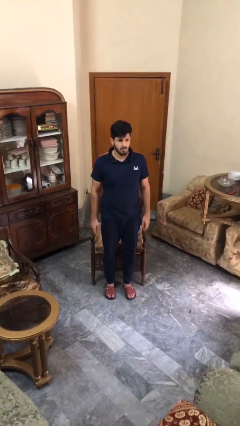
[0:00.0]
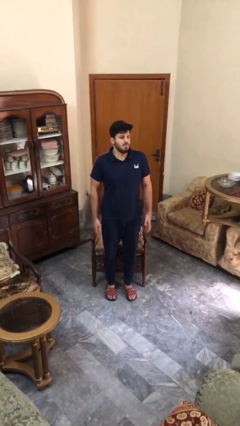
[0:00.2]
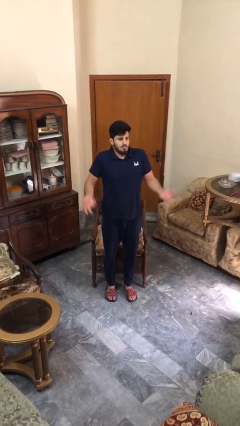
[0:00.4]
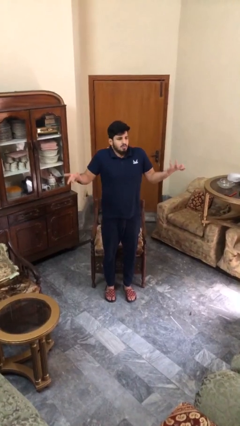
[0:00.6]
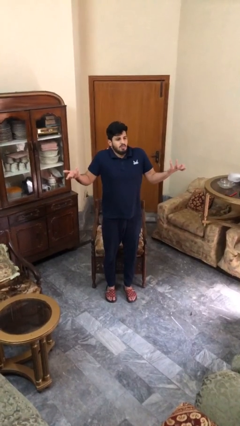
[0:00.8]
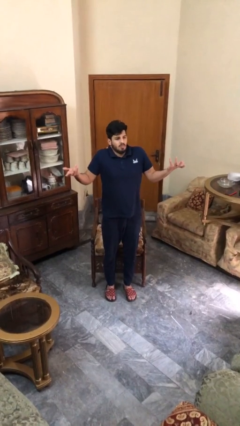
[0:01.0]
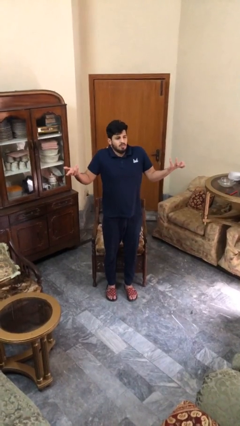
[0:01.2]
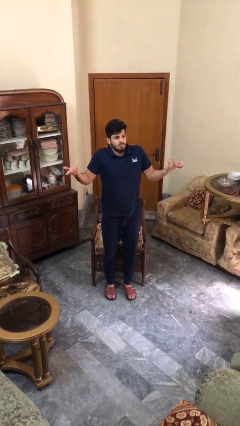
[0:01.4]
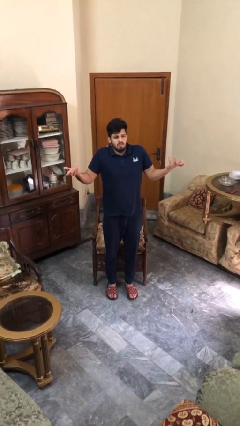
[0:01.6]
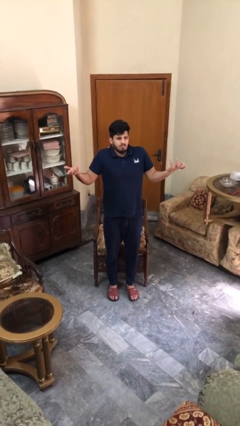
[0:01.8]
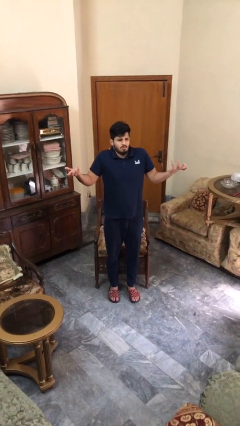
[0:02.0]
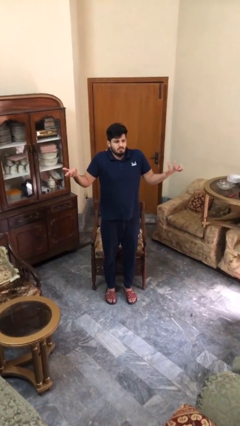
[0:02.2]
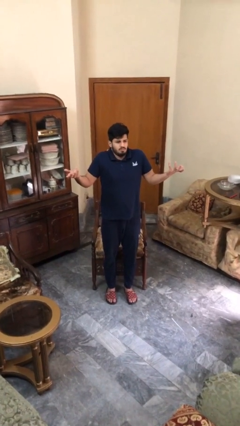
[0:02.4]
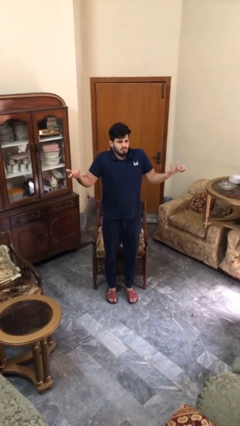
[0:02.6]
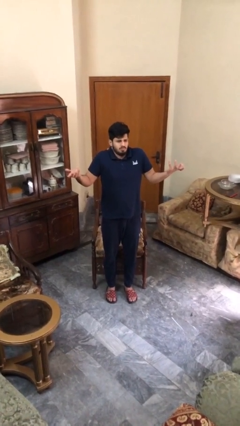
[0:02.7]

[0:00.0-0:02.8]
person shrugs

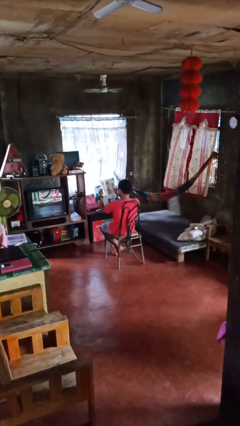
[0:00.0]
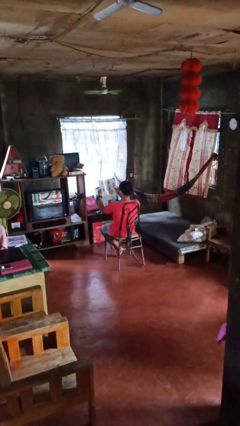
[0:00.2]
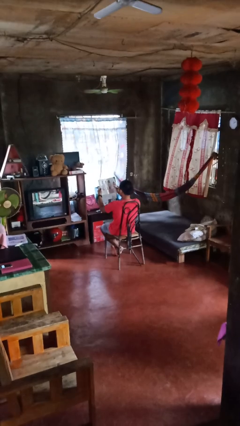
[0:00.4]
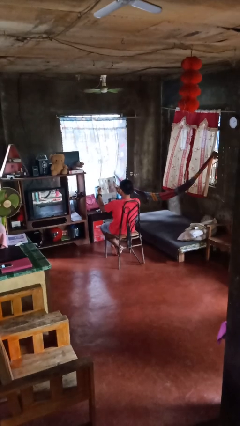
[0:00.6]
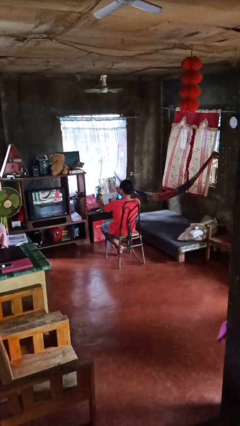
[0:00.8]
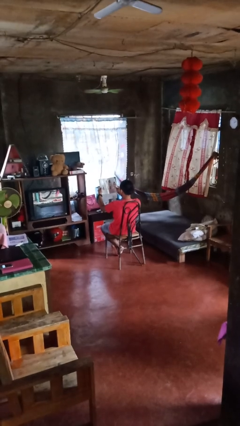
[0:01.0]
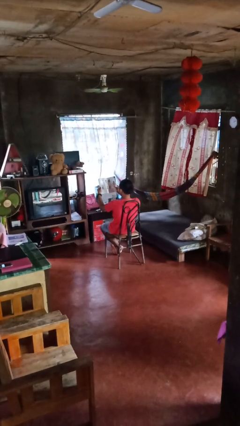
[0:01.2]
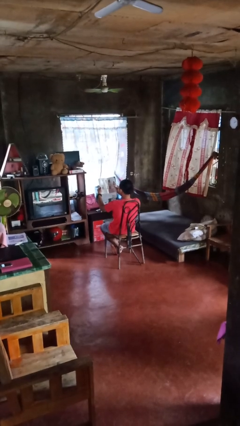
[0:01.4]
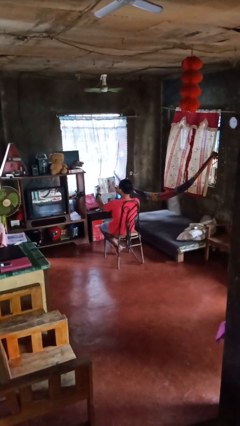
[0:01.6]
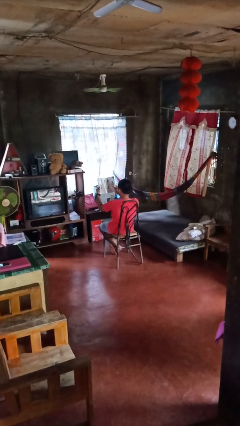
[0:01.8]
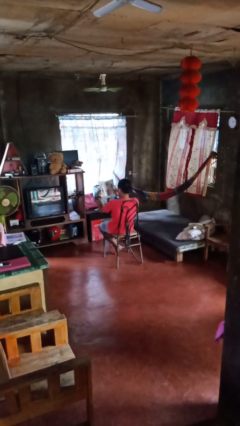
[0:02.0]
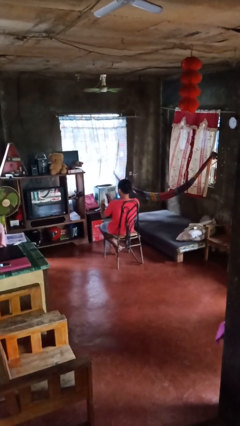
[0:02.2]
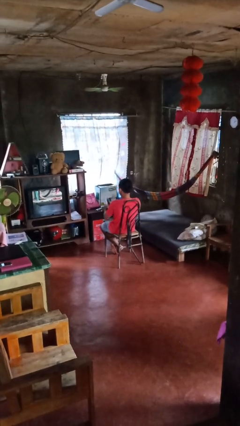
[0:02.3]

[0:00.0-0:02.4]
person reads magazine

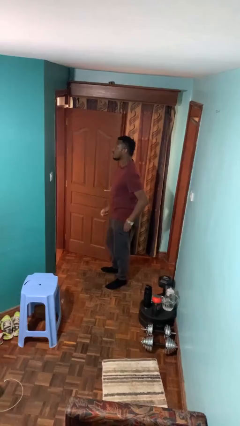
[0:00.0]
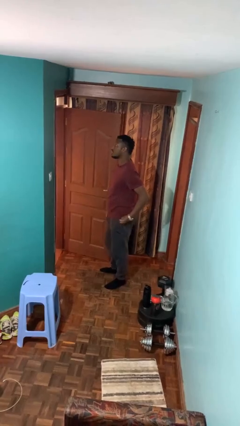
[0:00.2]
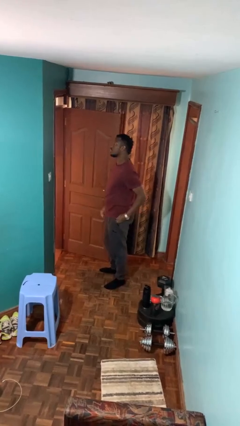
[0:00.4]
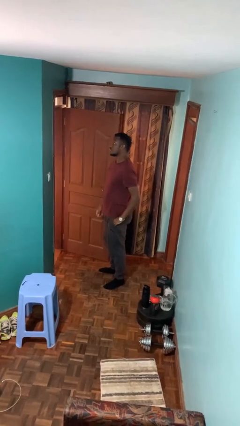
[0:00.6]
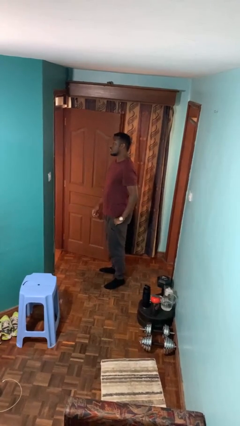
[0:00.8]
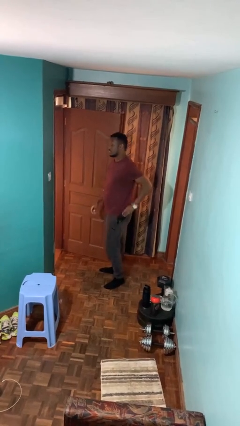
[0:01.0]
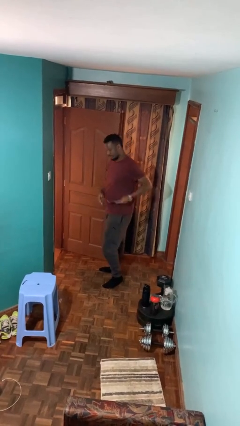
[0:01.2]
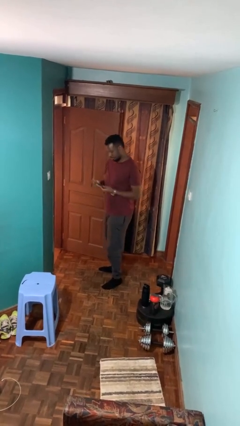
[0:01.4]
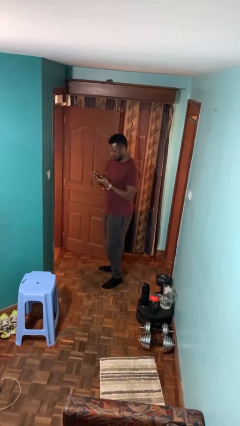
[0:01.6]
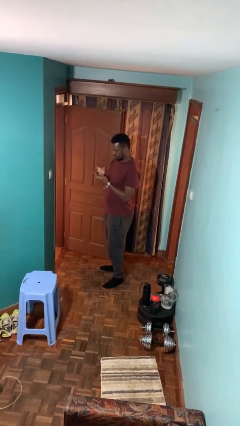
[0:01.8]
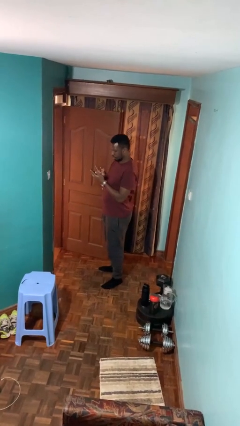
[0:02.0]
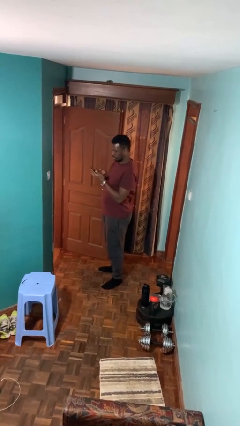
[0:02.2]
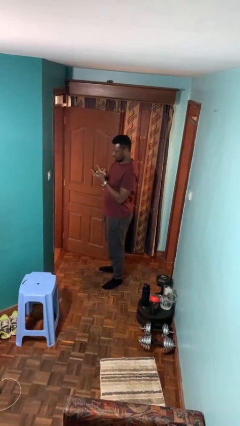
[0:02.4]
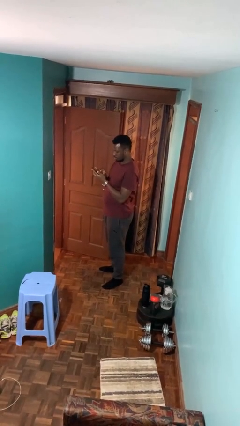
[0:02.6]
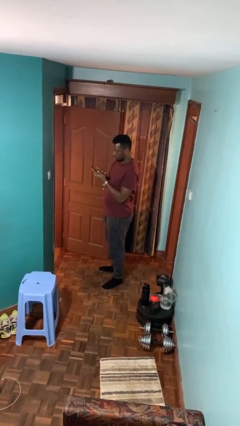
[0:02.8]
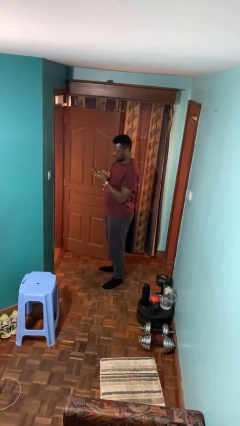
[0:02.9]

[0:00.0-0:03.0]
person takes phone from pocket

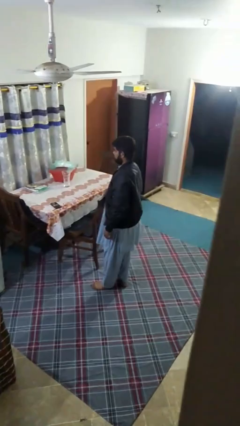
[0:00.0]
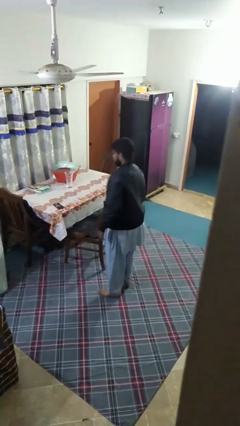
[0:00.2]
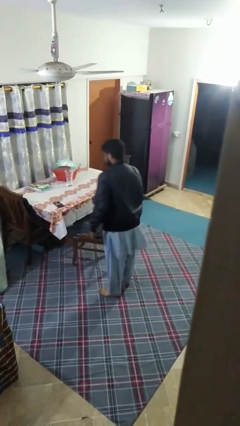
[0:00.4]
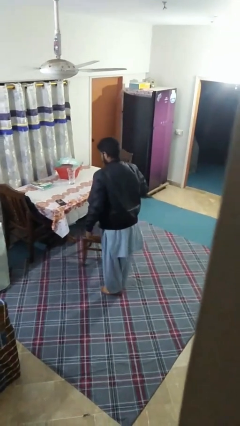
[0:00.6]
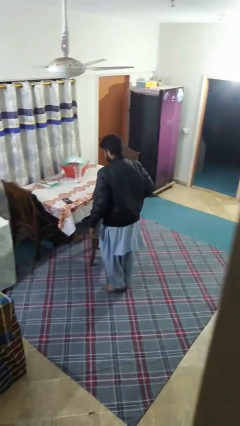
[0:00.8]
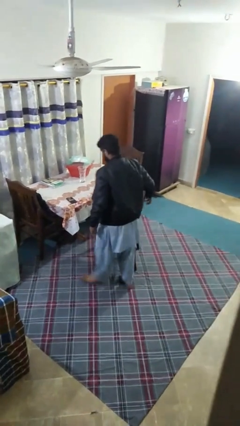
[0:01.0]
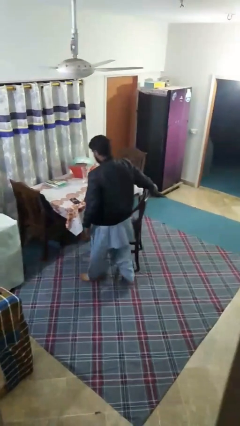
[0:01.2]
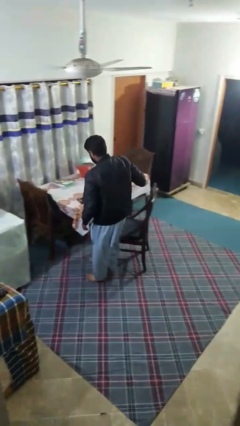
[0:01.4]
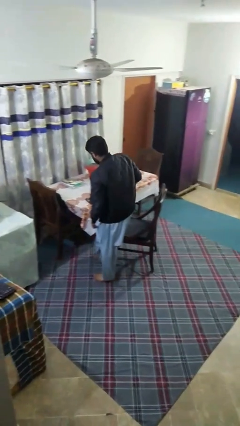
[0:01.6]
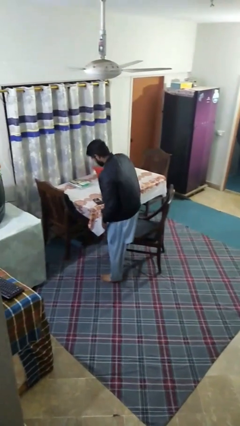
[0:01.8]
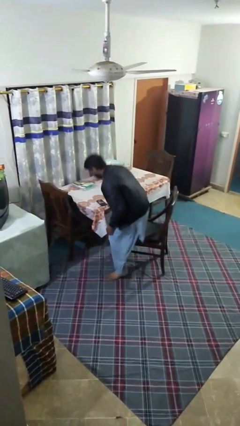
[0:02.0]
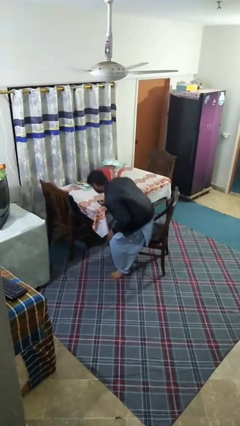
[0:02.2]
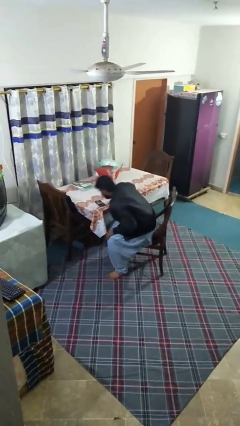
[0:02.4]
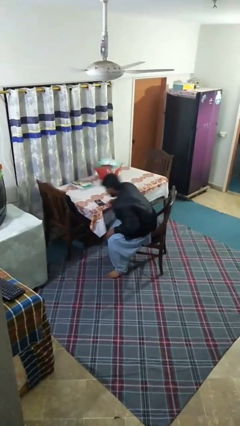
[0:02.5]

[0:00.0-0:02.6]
person sits down

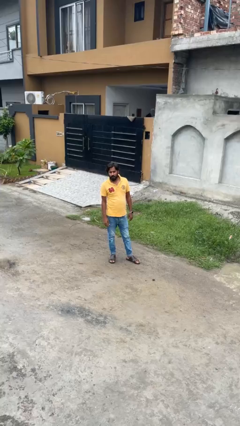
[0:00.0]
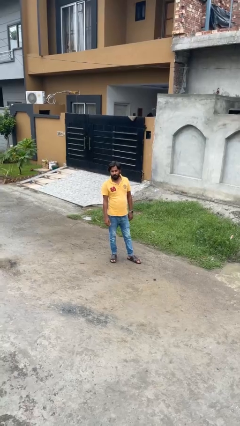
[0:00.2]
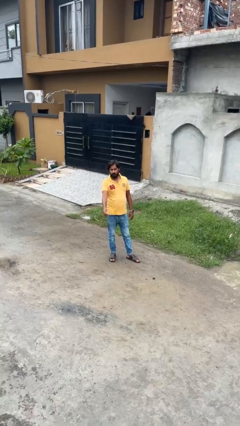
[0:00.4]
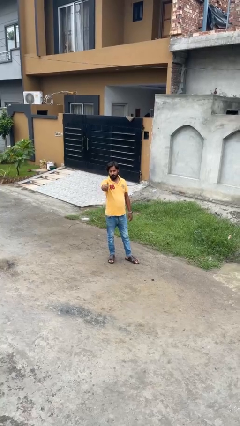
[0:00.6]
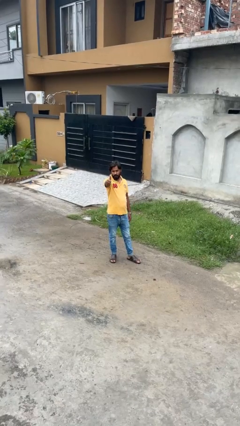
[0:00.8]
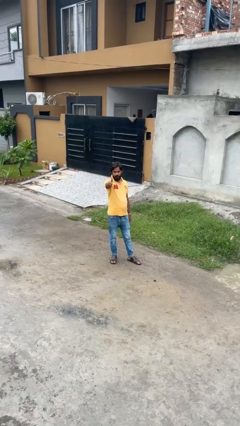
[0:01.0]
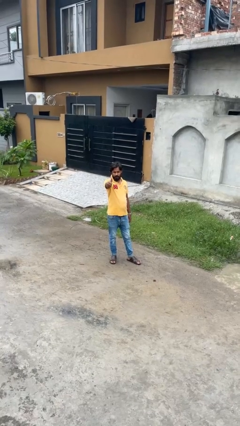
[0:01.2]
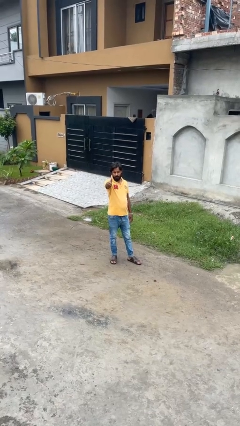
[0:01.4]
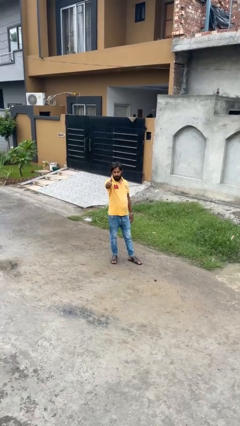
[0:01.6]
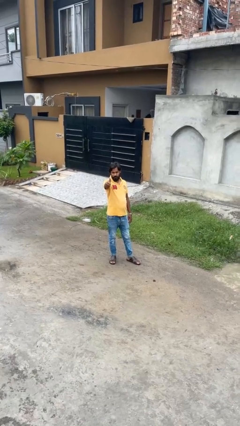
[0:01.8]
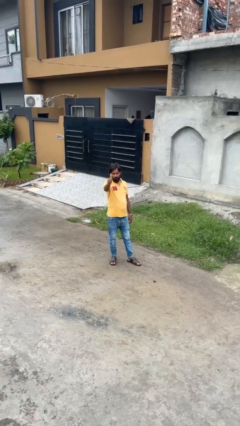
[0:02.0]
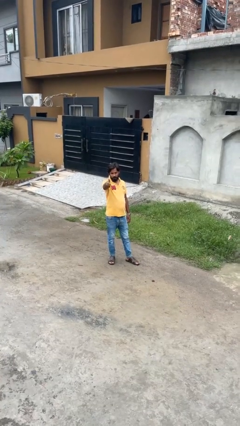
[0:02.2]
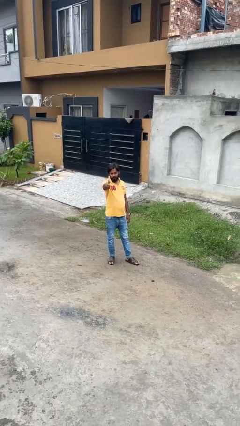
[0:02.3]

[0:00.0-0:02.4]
person gestures thumbs up

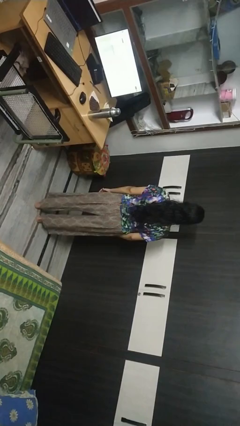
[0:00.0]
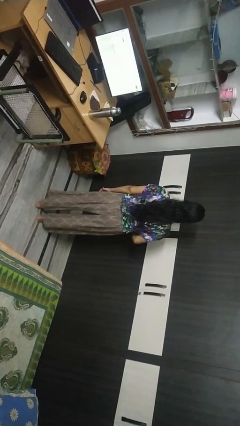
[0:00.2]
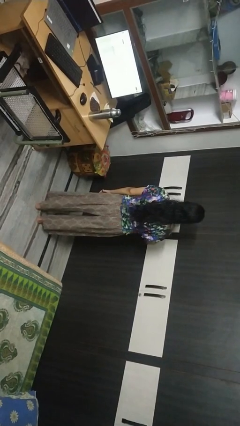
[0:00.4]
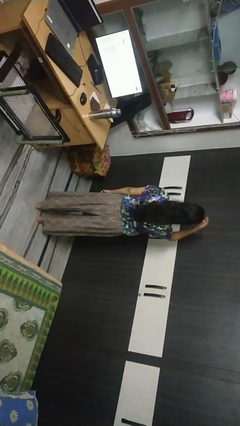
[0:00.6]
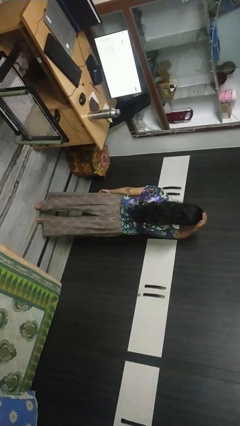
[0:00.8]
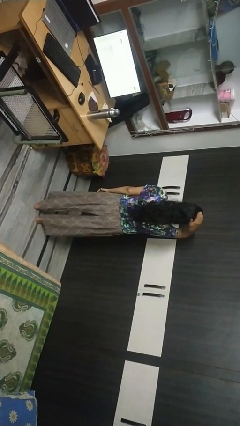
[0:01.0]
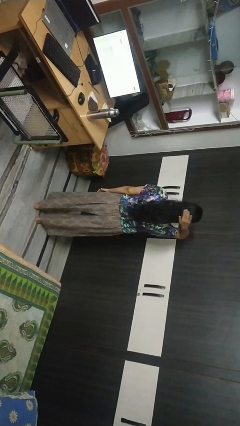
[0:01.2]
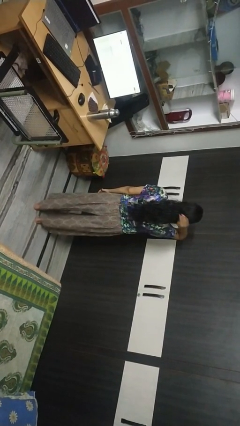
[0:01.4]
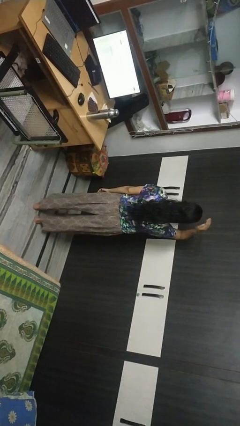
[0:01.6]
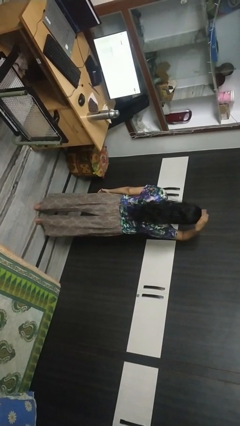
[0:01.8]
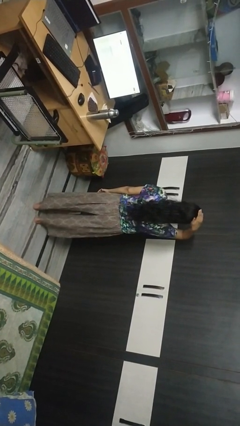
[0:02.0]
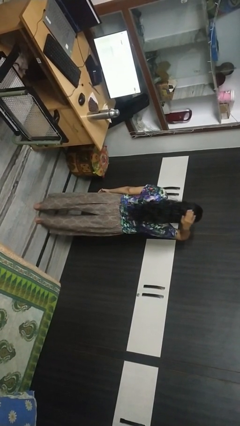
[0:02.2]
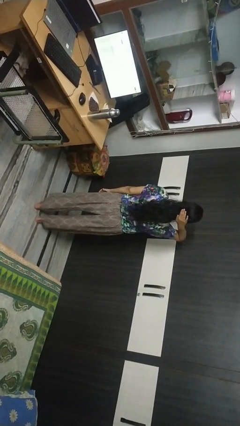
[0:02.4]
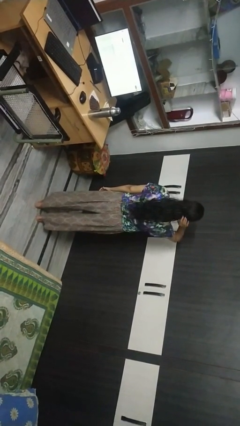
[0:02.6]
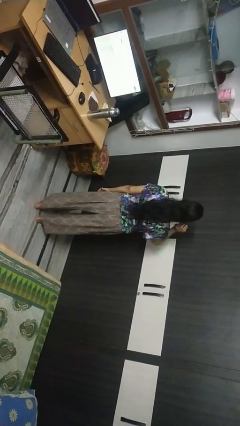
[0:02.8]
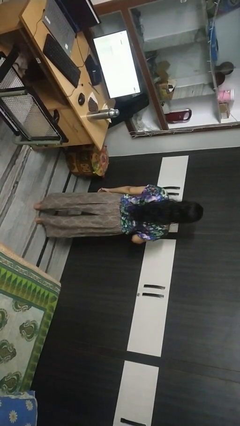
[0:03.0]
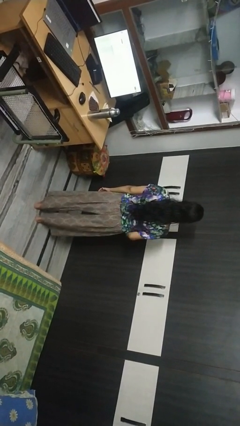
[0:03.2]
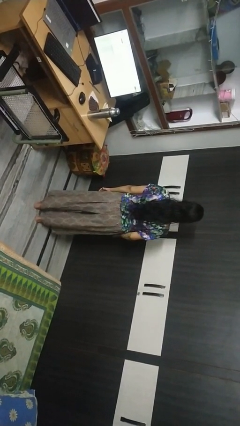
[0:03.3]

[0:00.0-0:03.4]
person pats head

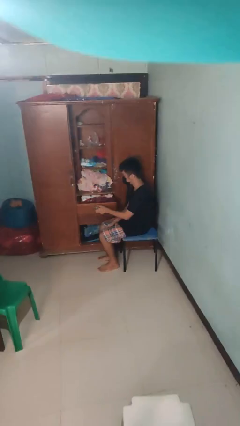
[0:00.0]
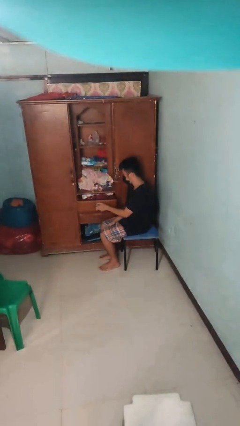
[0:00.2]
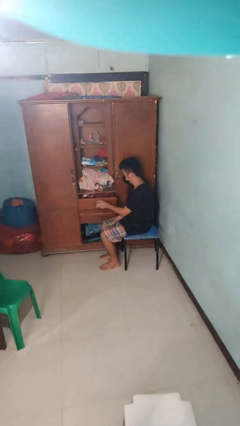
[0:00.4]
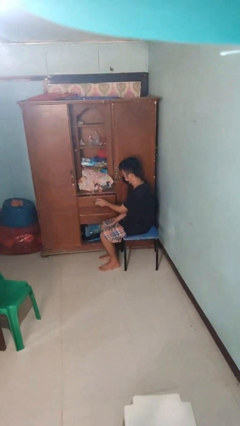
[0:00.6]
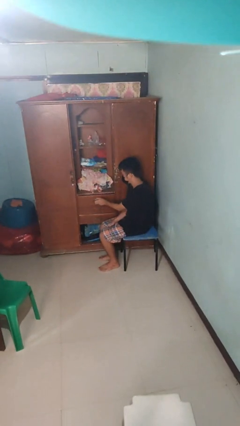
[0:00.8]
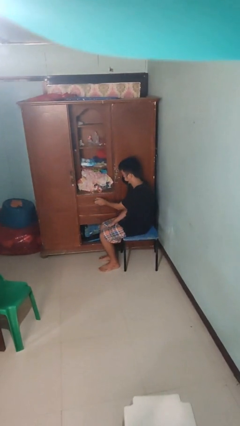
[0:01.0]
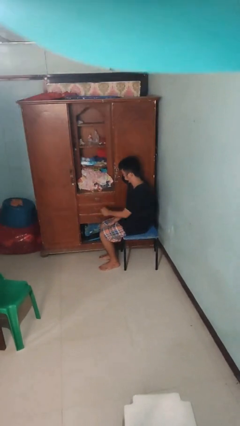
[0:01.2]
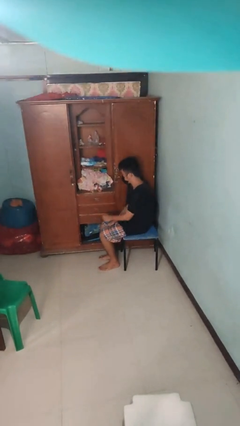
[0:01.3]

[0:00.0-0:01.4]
person closes dresser drawer
